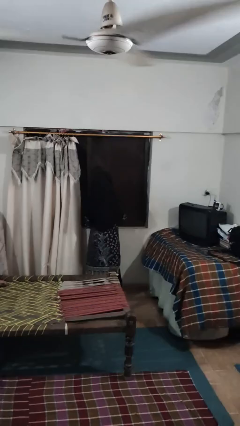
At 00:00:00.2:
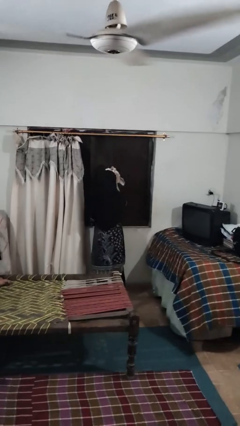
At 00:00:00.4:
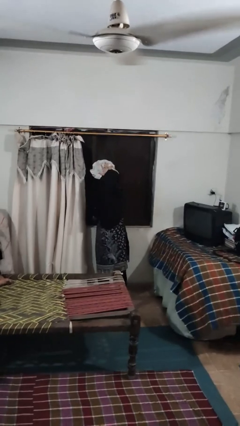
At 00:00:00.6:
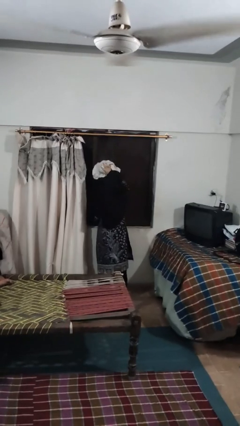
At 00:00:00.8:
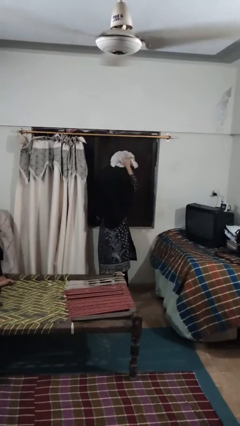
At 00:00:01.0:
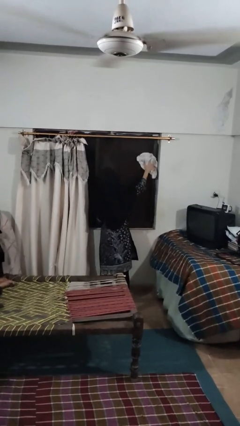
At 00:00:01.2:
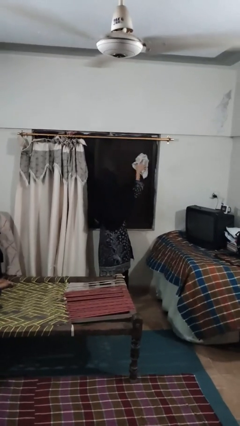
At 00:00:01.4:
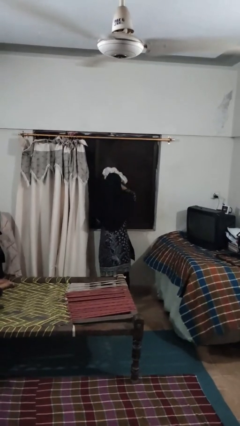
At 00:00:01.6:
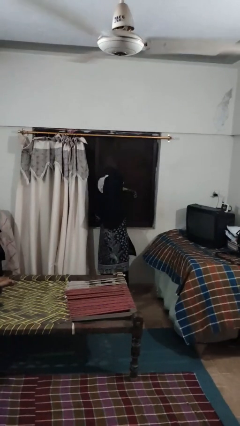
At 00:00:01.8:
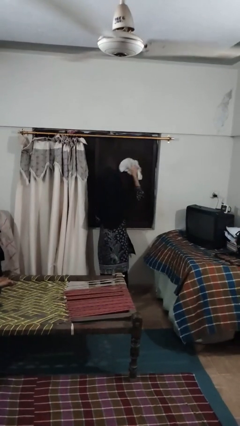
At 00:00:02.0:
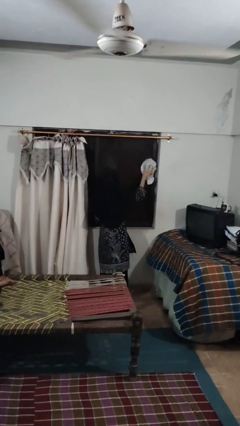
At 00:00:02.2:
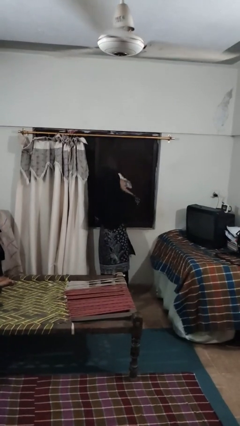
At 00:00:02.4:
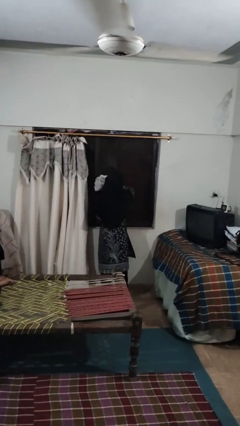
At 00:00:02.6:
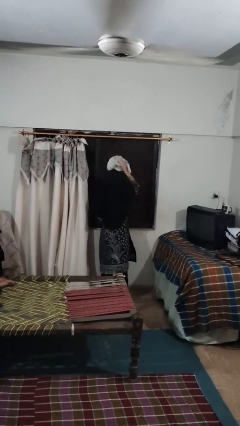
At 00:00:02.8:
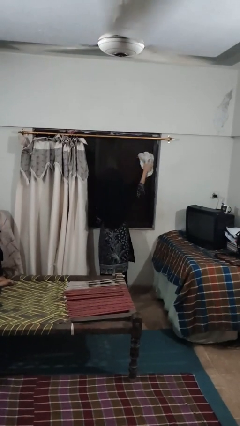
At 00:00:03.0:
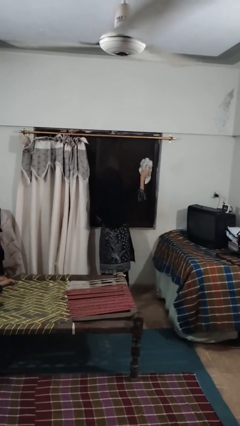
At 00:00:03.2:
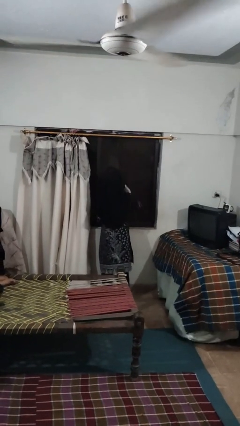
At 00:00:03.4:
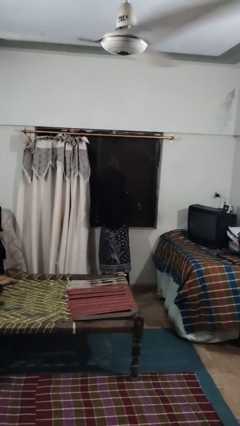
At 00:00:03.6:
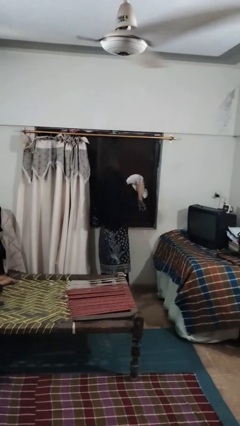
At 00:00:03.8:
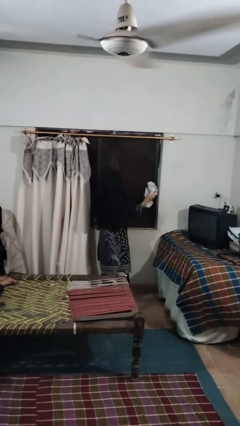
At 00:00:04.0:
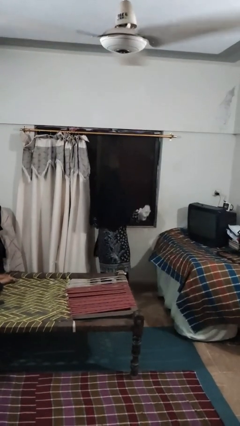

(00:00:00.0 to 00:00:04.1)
person washes window

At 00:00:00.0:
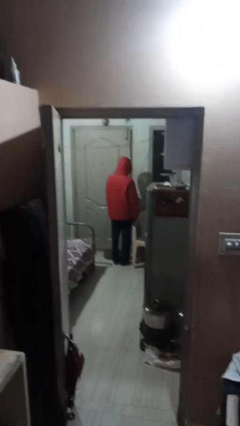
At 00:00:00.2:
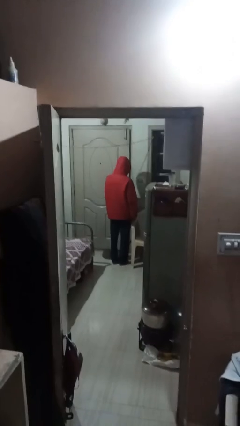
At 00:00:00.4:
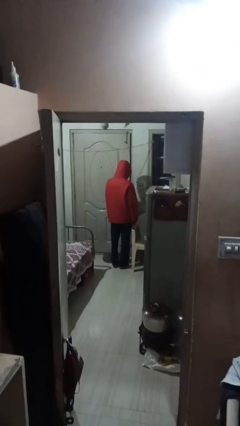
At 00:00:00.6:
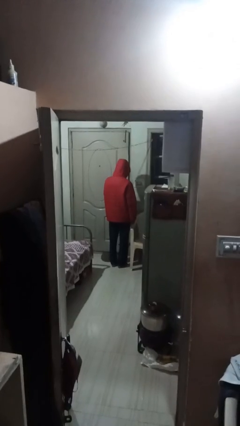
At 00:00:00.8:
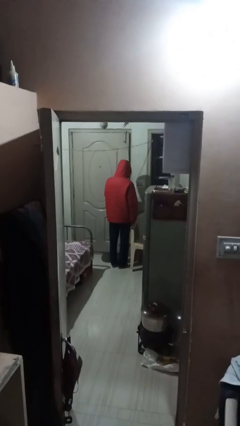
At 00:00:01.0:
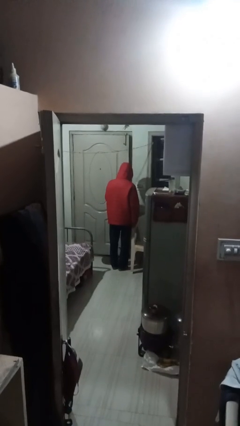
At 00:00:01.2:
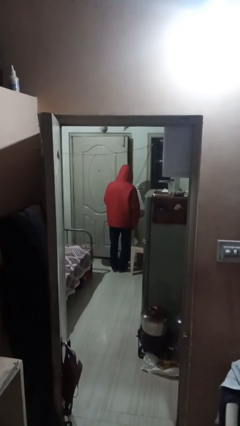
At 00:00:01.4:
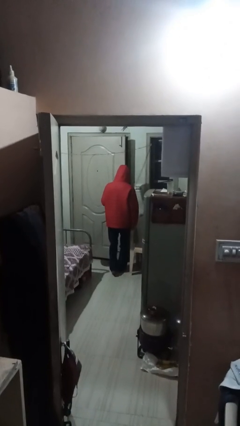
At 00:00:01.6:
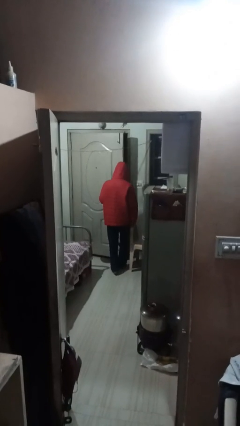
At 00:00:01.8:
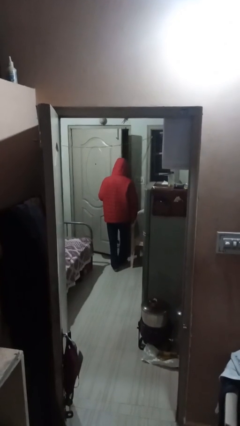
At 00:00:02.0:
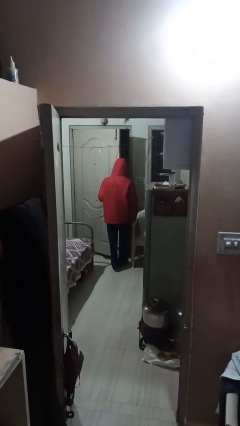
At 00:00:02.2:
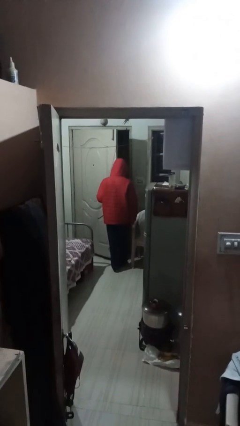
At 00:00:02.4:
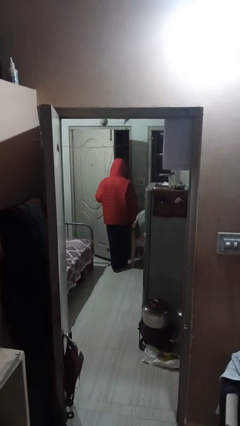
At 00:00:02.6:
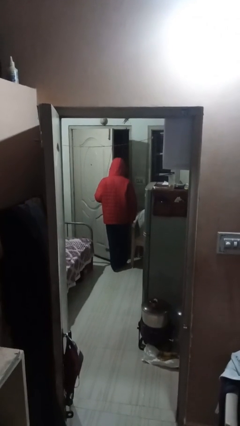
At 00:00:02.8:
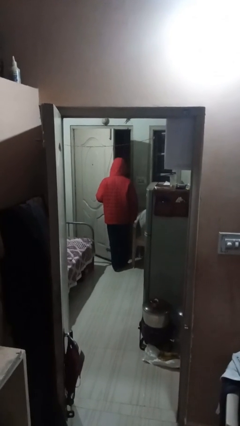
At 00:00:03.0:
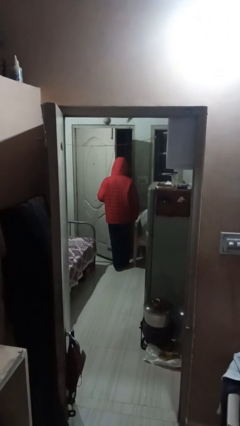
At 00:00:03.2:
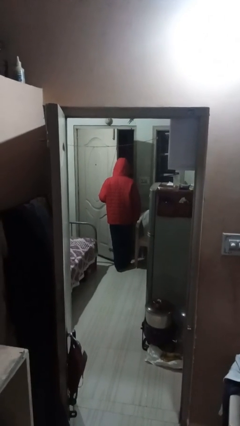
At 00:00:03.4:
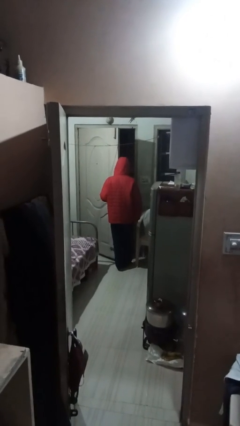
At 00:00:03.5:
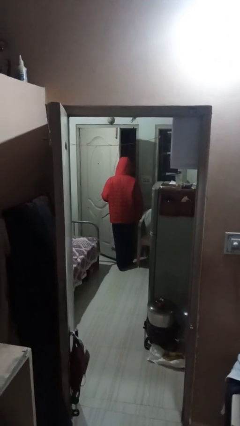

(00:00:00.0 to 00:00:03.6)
person opens facility door

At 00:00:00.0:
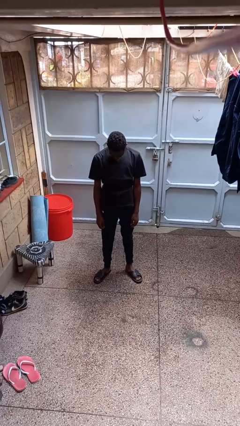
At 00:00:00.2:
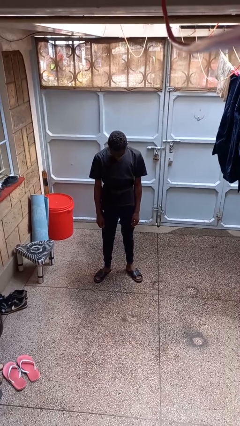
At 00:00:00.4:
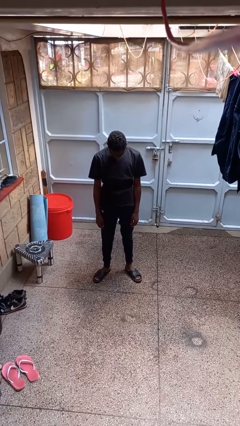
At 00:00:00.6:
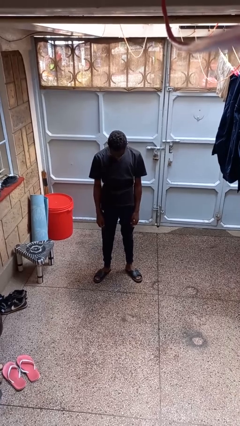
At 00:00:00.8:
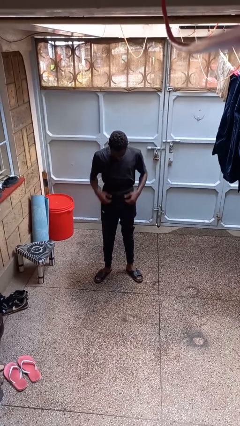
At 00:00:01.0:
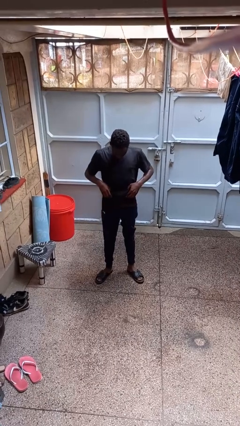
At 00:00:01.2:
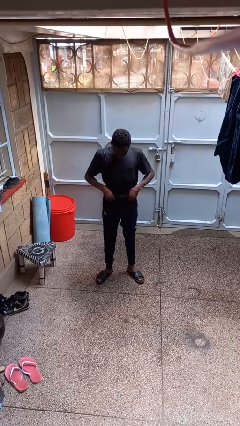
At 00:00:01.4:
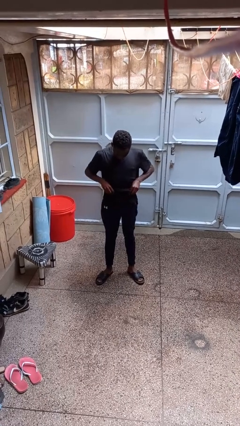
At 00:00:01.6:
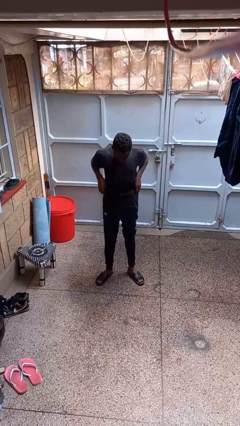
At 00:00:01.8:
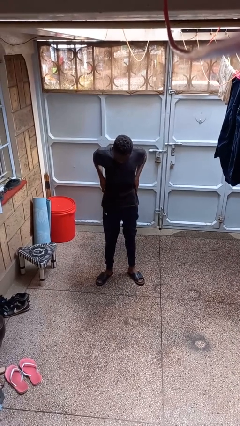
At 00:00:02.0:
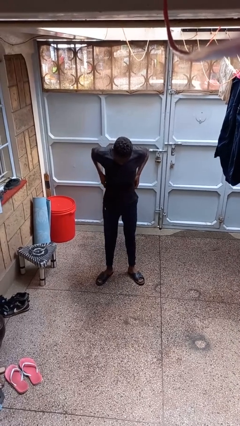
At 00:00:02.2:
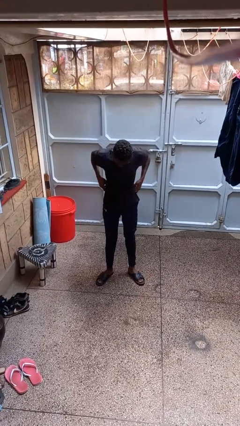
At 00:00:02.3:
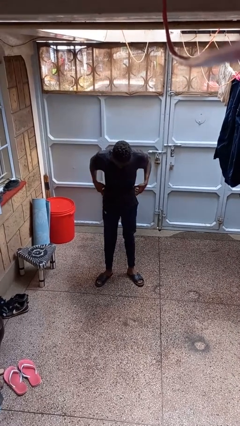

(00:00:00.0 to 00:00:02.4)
person hikes up pants

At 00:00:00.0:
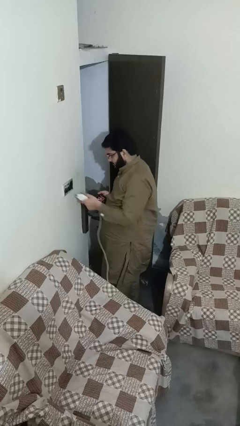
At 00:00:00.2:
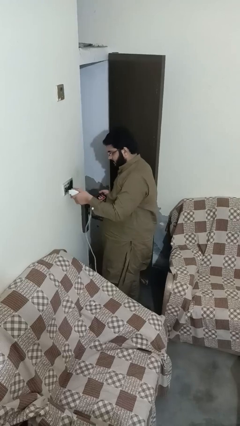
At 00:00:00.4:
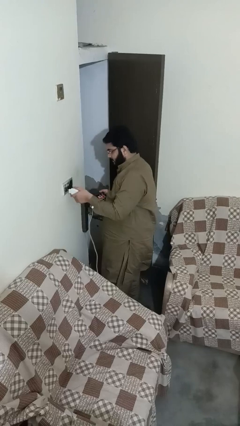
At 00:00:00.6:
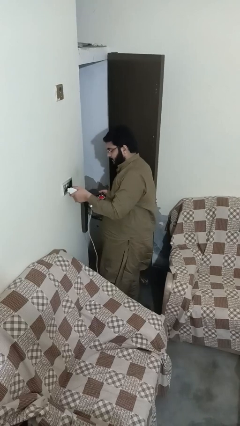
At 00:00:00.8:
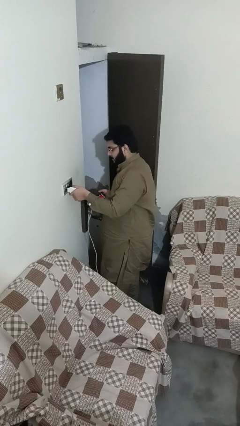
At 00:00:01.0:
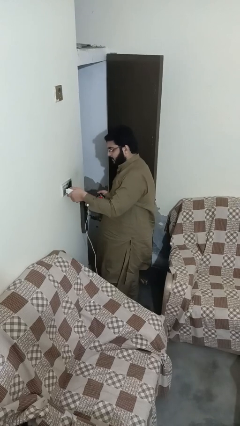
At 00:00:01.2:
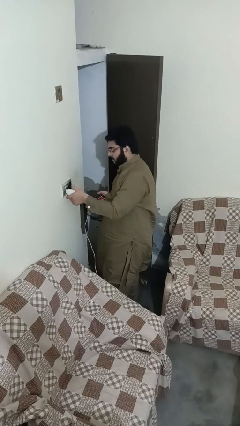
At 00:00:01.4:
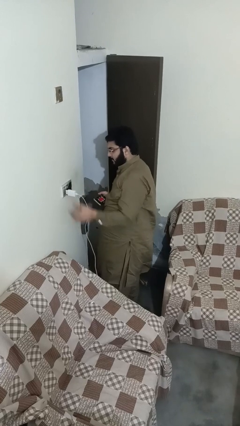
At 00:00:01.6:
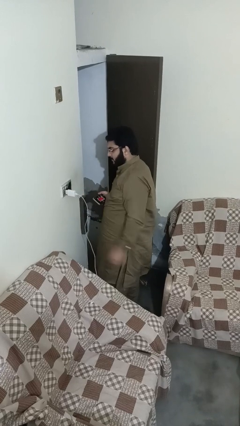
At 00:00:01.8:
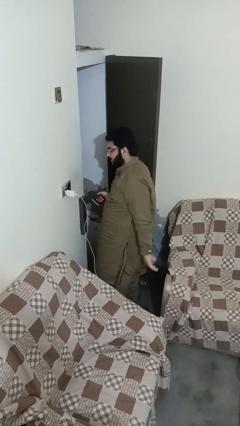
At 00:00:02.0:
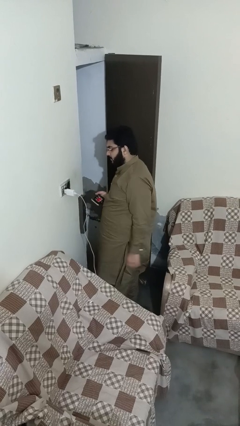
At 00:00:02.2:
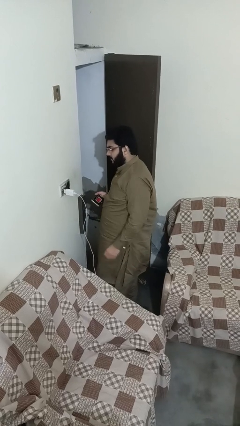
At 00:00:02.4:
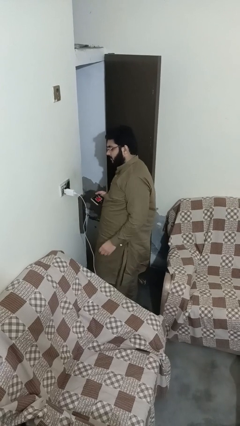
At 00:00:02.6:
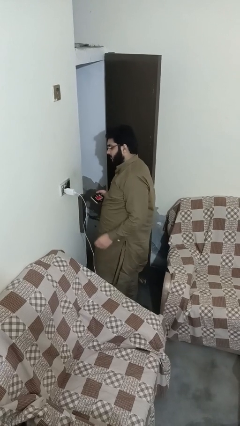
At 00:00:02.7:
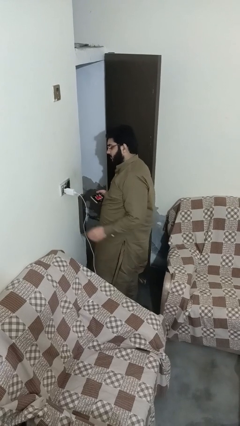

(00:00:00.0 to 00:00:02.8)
person plugs into electrical socket

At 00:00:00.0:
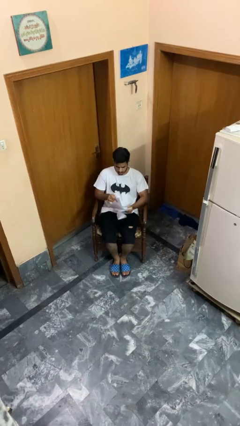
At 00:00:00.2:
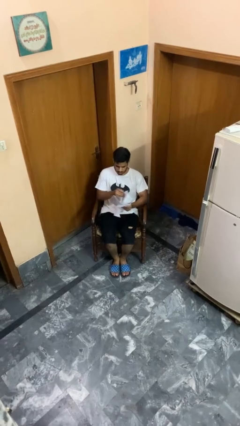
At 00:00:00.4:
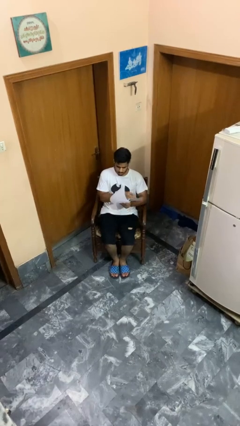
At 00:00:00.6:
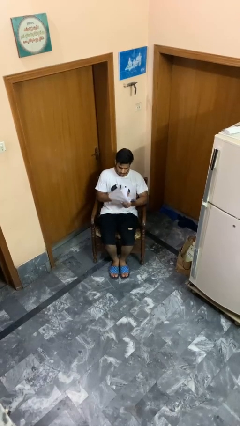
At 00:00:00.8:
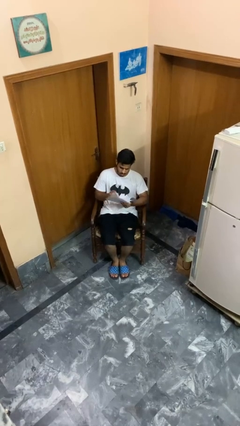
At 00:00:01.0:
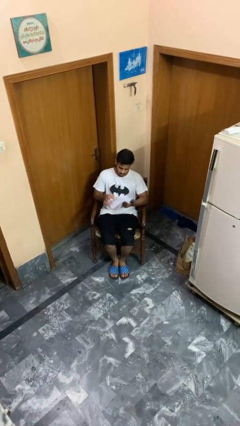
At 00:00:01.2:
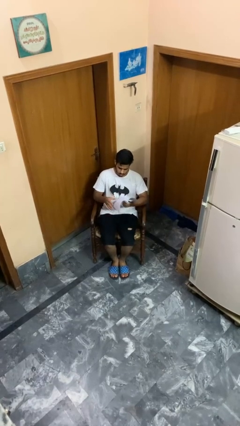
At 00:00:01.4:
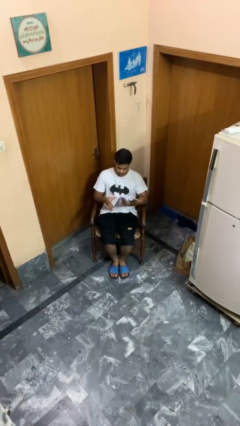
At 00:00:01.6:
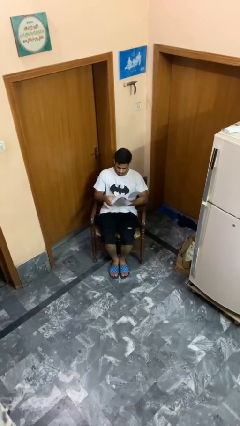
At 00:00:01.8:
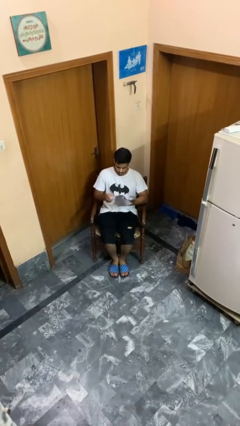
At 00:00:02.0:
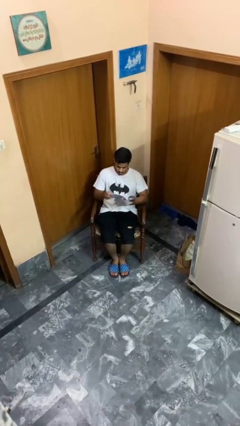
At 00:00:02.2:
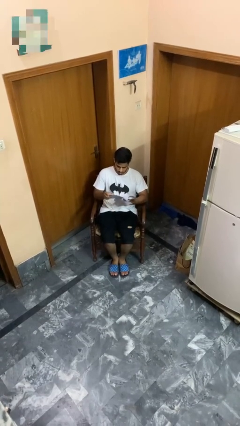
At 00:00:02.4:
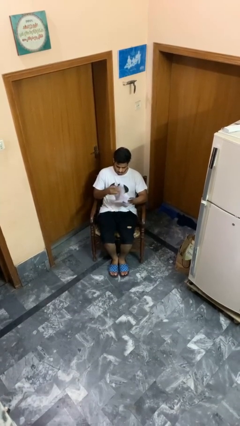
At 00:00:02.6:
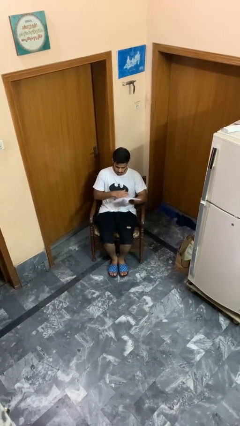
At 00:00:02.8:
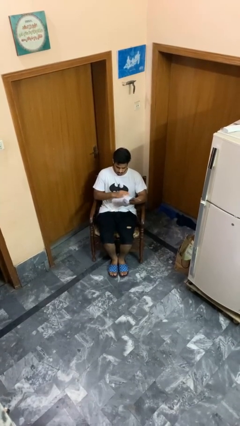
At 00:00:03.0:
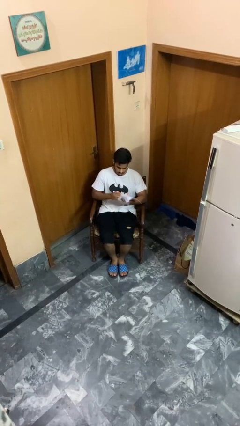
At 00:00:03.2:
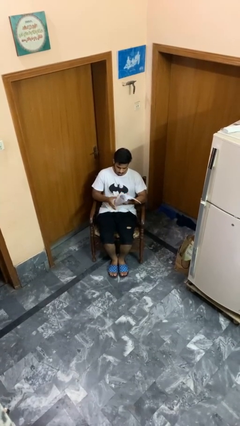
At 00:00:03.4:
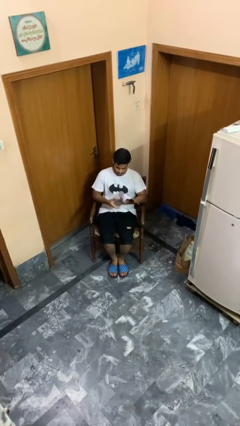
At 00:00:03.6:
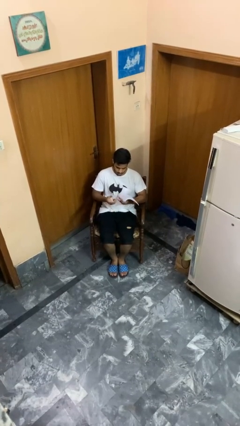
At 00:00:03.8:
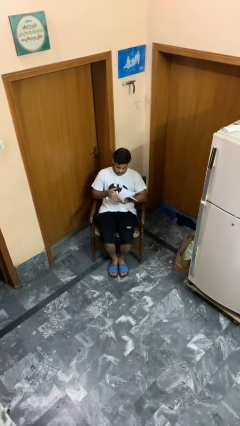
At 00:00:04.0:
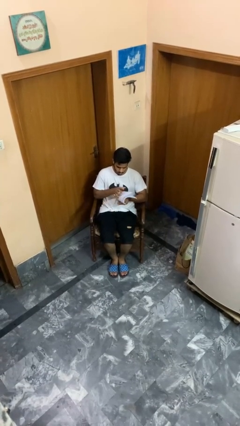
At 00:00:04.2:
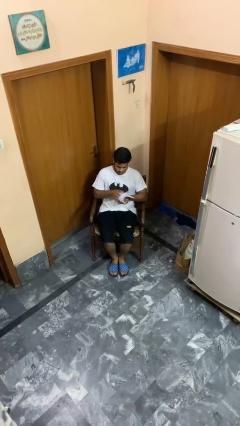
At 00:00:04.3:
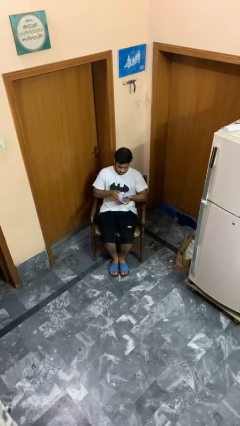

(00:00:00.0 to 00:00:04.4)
person reads magazine
